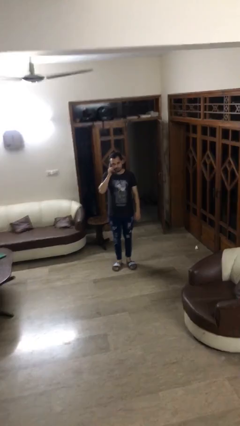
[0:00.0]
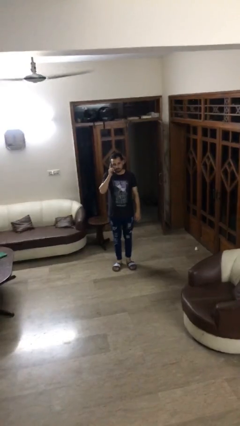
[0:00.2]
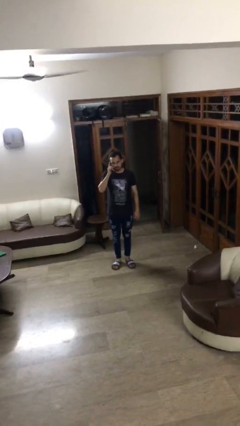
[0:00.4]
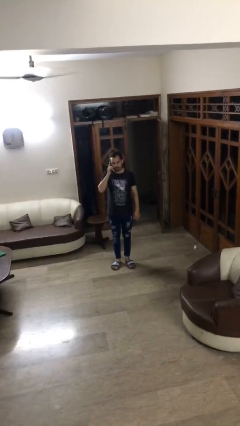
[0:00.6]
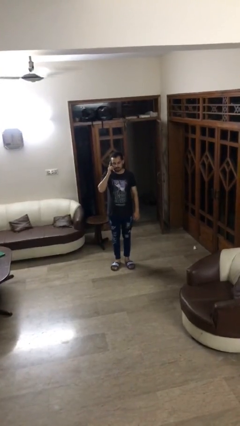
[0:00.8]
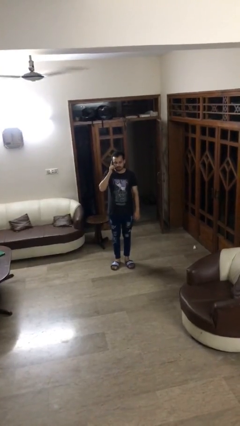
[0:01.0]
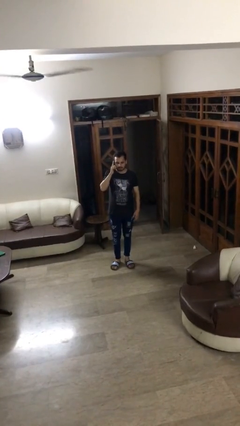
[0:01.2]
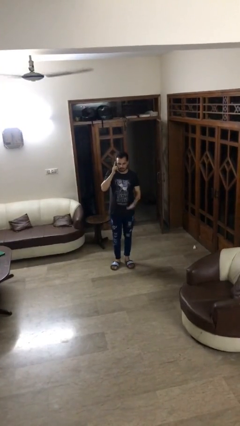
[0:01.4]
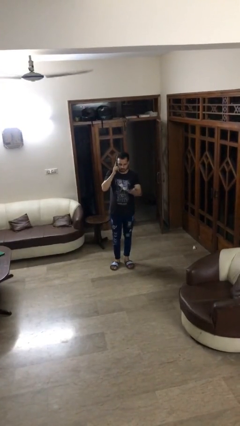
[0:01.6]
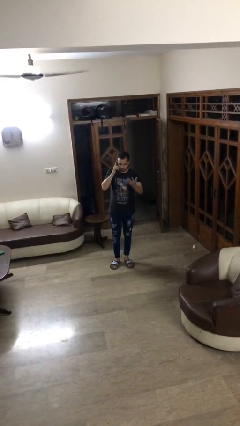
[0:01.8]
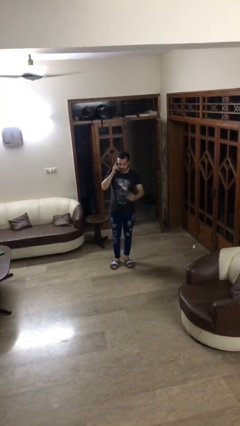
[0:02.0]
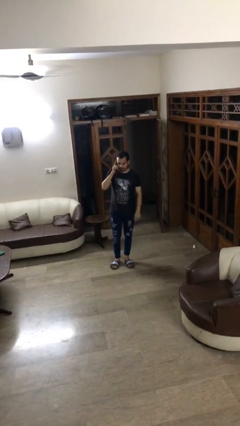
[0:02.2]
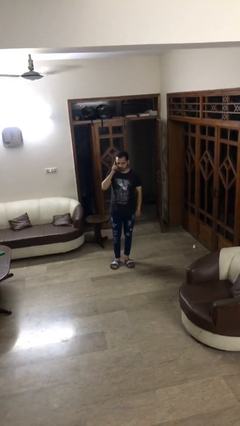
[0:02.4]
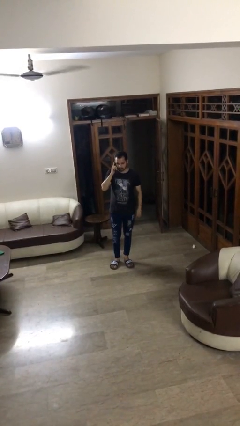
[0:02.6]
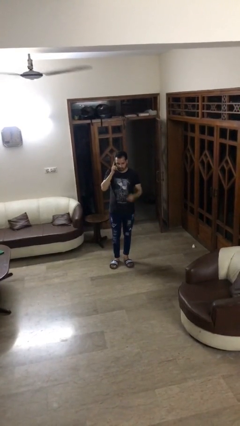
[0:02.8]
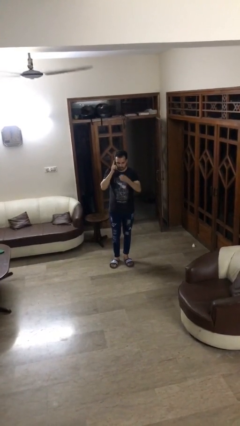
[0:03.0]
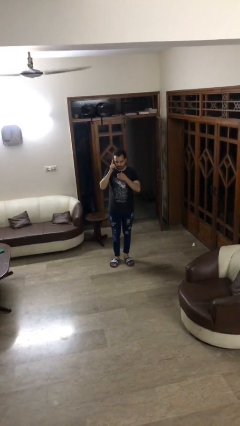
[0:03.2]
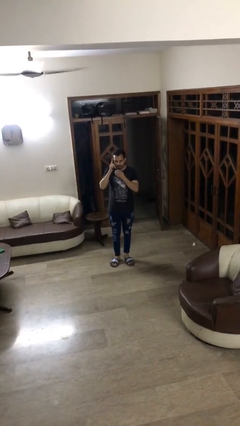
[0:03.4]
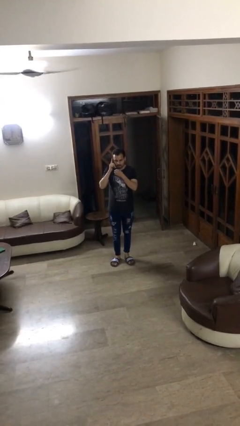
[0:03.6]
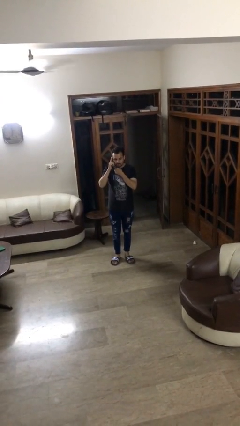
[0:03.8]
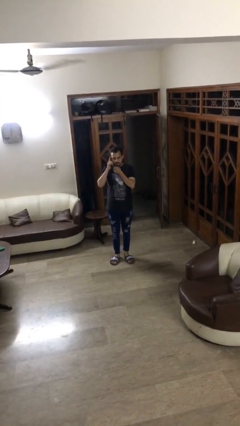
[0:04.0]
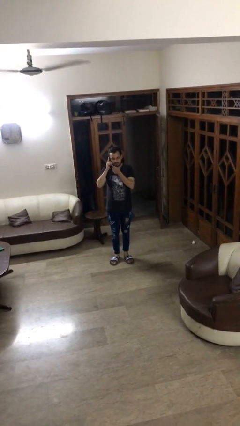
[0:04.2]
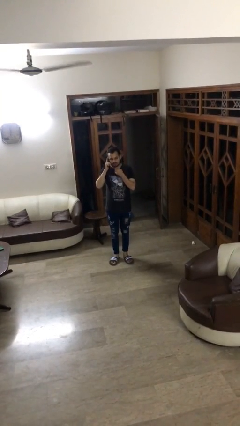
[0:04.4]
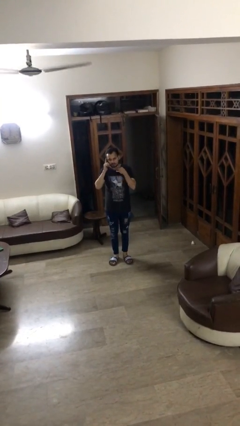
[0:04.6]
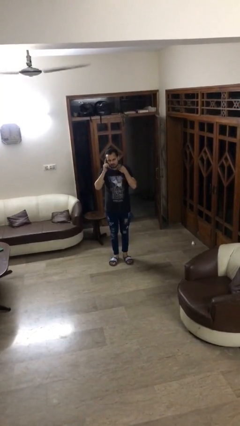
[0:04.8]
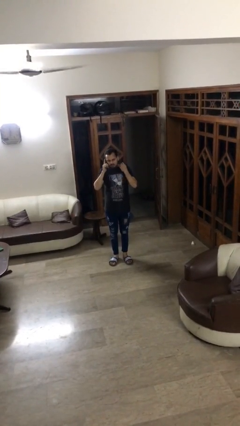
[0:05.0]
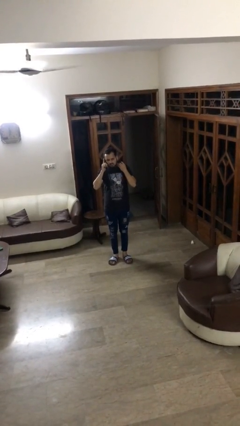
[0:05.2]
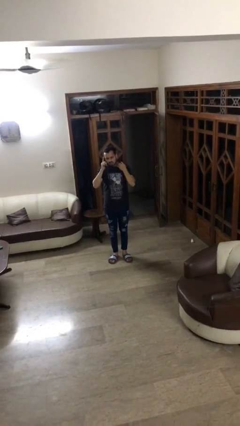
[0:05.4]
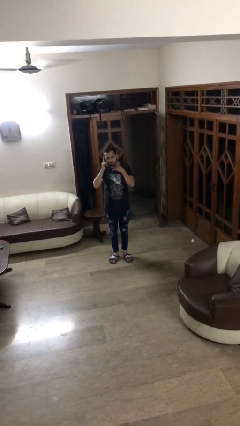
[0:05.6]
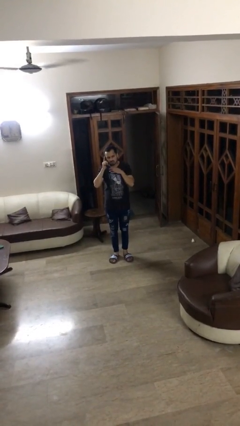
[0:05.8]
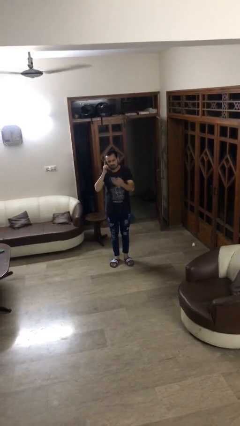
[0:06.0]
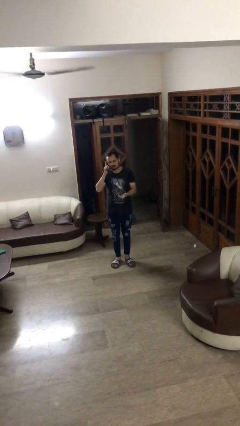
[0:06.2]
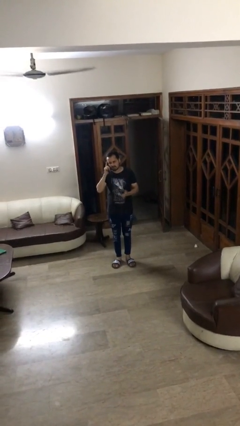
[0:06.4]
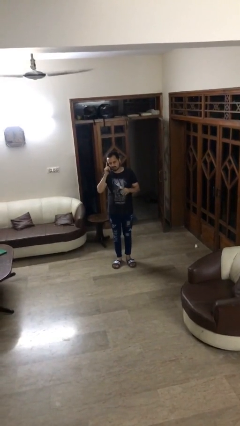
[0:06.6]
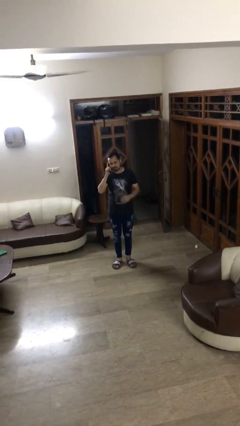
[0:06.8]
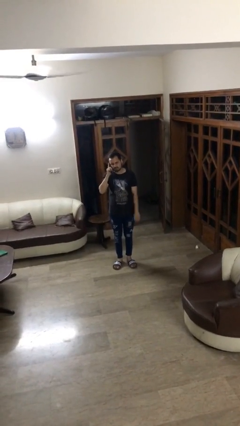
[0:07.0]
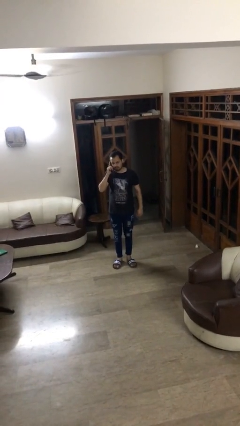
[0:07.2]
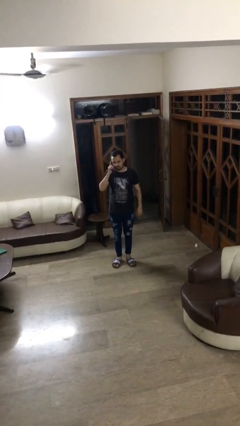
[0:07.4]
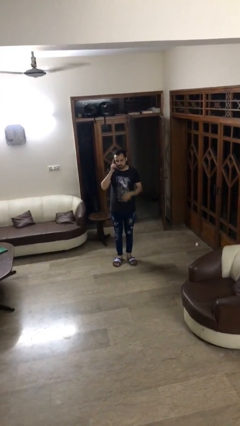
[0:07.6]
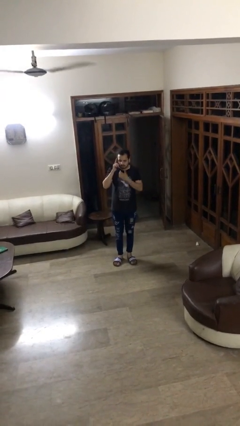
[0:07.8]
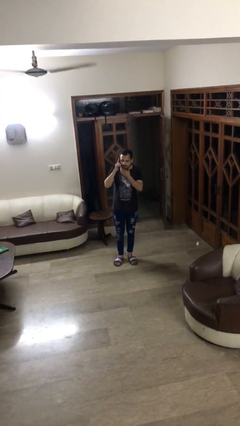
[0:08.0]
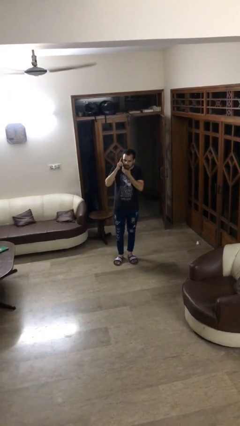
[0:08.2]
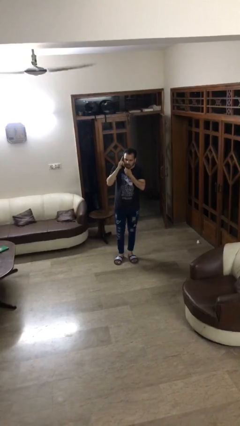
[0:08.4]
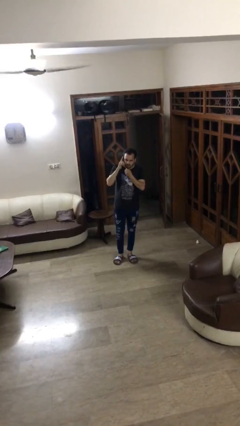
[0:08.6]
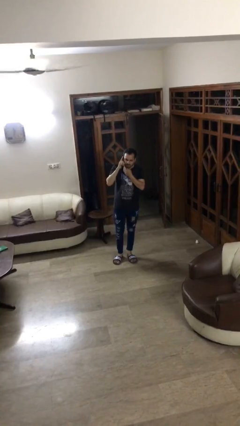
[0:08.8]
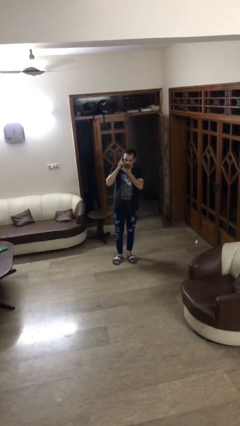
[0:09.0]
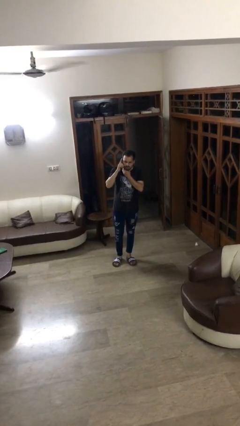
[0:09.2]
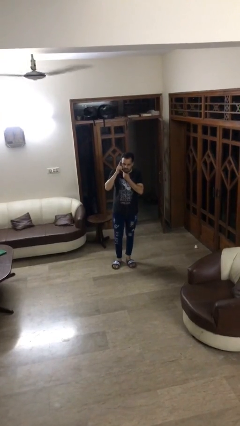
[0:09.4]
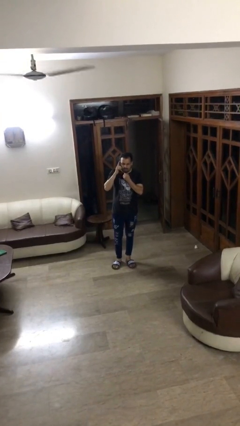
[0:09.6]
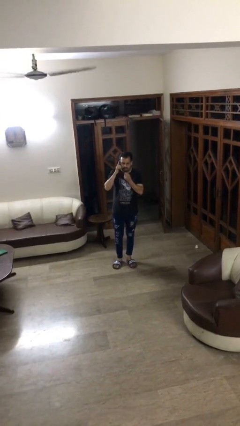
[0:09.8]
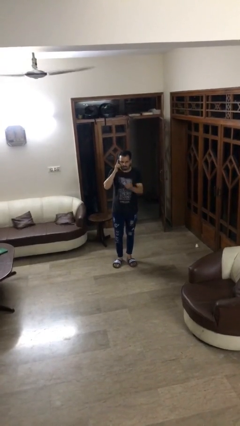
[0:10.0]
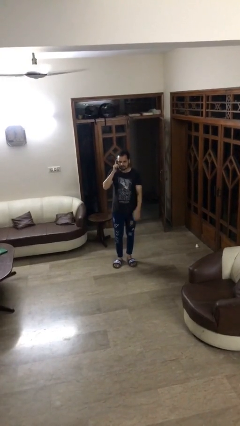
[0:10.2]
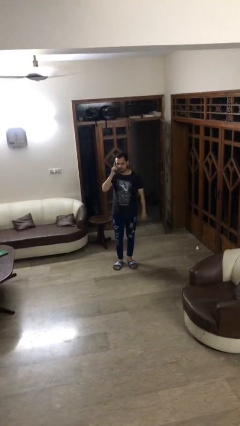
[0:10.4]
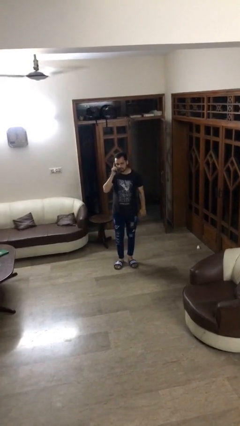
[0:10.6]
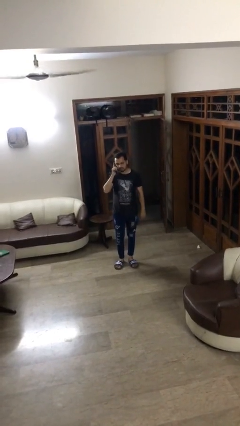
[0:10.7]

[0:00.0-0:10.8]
person talks on phone

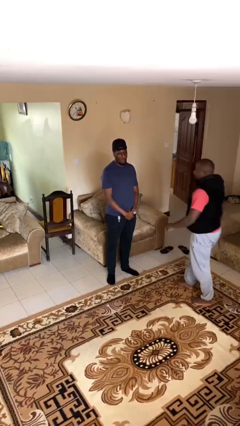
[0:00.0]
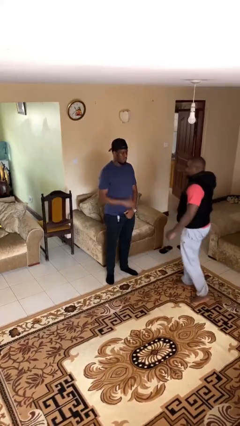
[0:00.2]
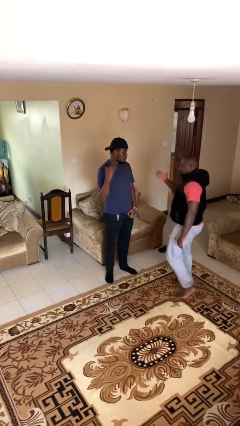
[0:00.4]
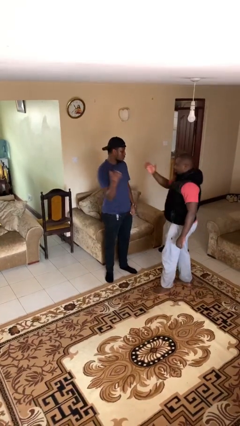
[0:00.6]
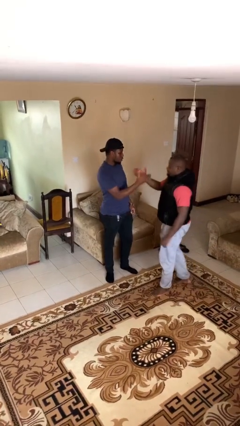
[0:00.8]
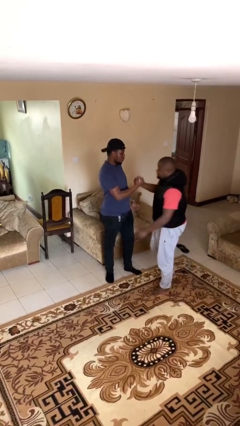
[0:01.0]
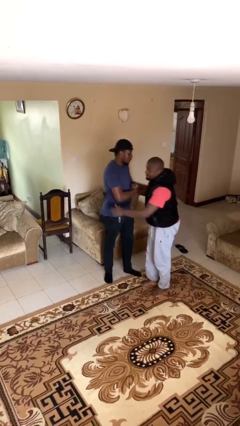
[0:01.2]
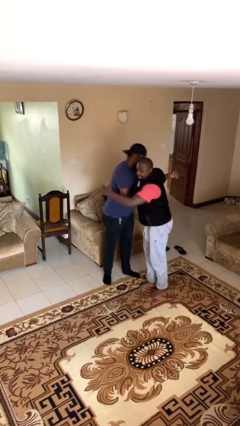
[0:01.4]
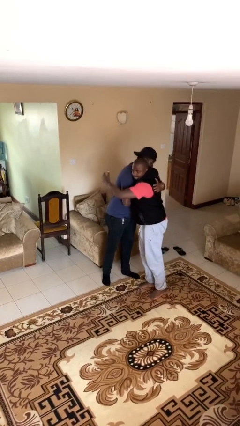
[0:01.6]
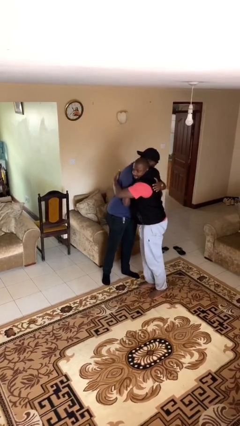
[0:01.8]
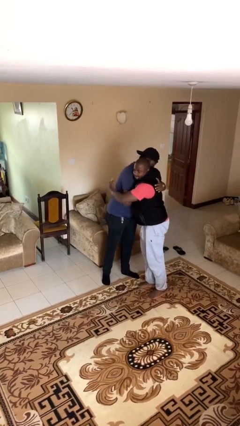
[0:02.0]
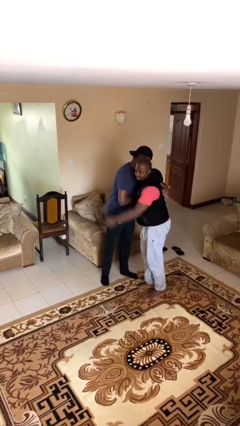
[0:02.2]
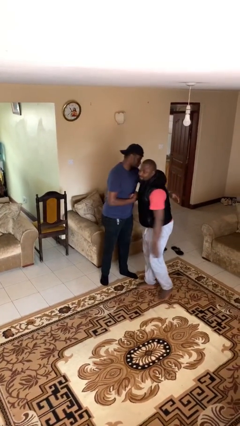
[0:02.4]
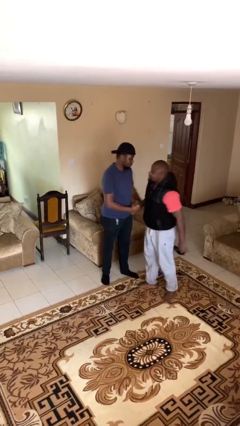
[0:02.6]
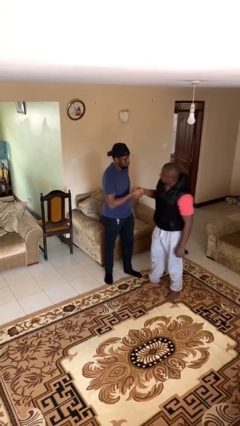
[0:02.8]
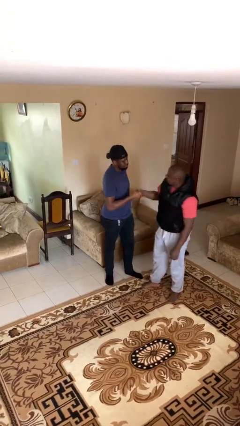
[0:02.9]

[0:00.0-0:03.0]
person embraces person

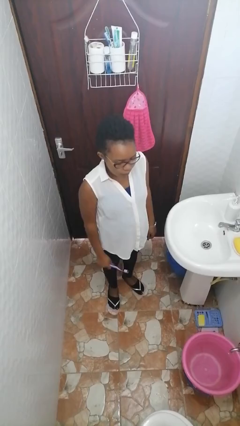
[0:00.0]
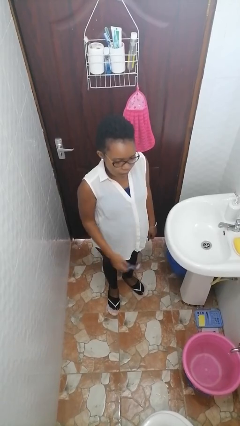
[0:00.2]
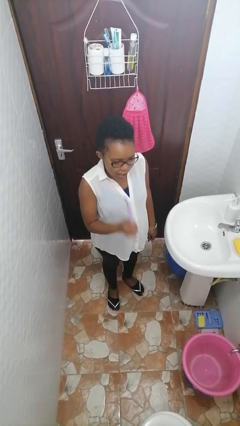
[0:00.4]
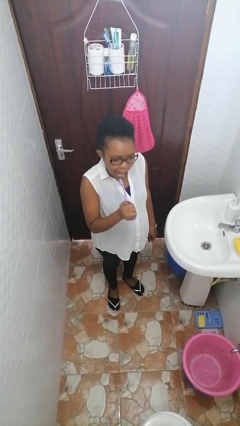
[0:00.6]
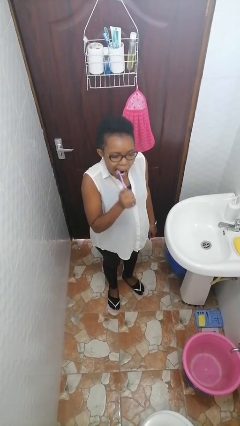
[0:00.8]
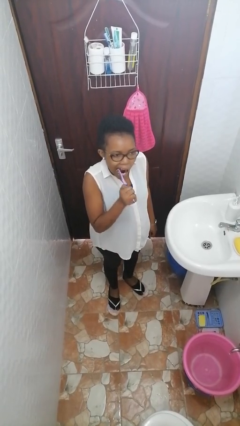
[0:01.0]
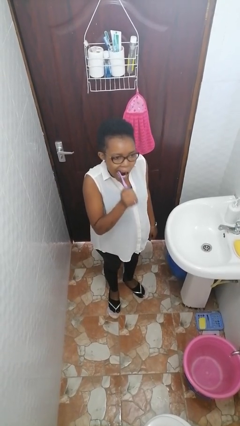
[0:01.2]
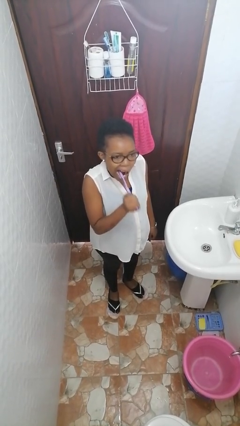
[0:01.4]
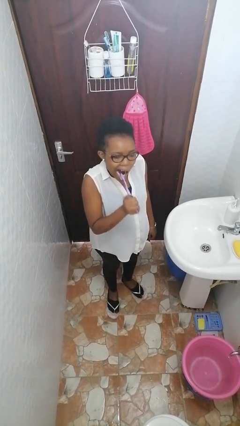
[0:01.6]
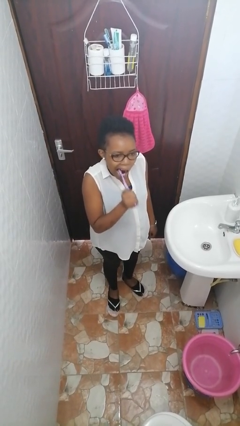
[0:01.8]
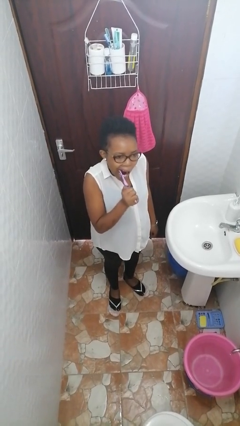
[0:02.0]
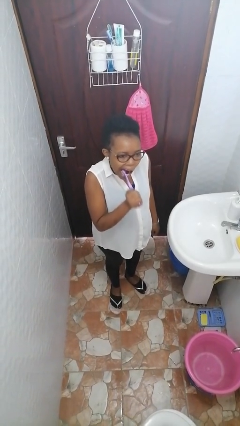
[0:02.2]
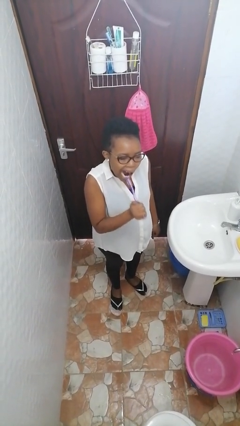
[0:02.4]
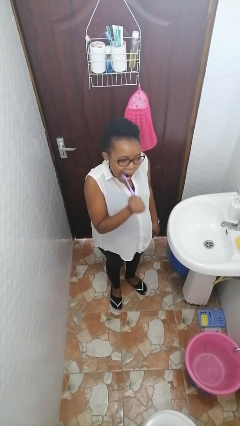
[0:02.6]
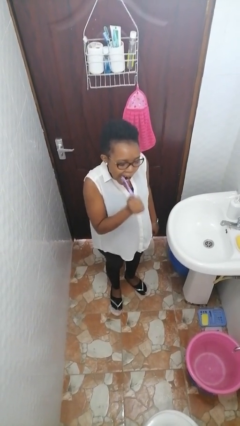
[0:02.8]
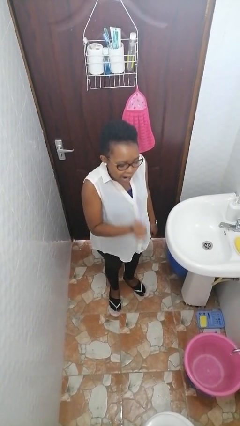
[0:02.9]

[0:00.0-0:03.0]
person brushes teeth

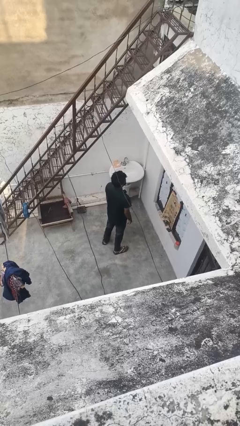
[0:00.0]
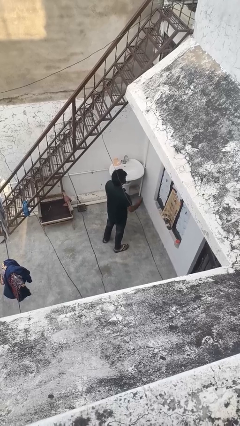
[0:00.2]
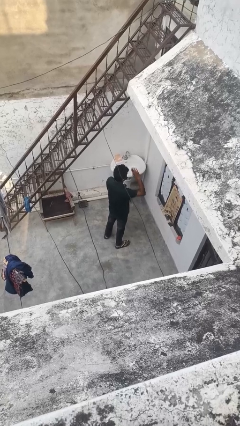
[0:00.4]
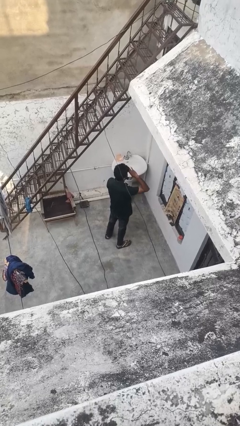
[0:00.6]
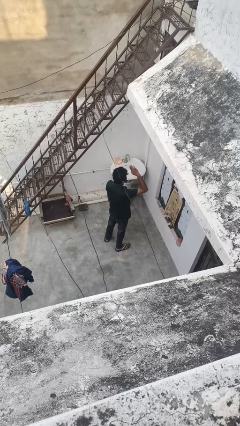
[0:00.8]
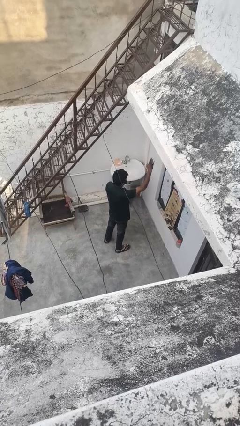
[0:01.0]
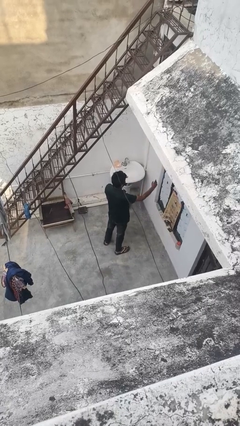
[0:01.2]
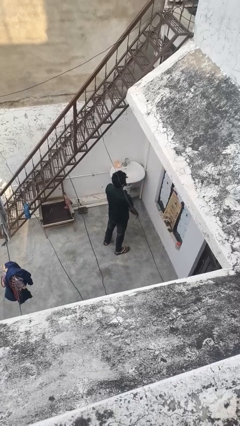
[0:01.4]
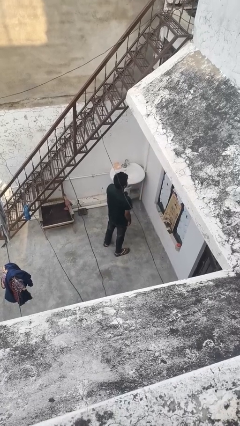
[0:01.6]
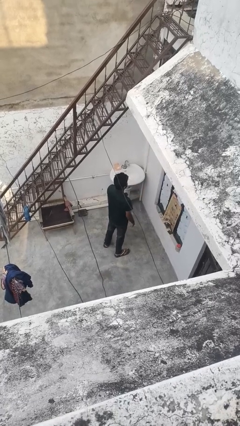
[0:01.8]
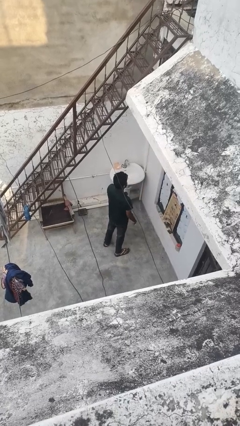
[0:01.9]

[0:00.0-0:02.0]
person salutes
